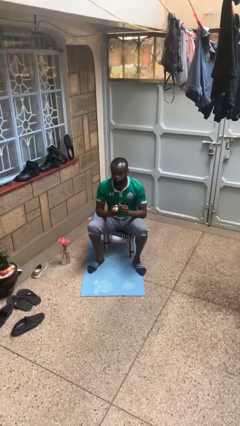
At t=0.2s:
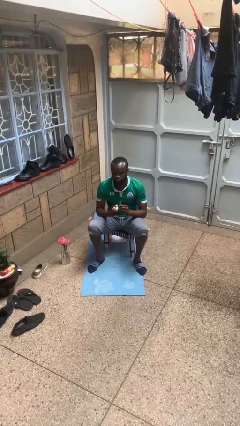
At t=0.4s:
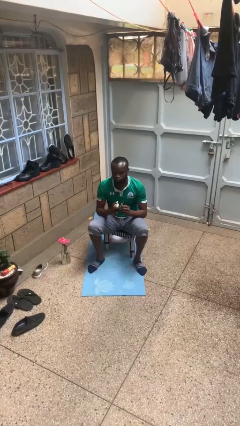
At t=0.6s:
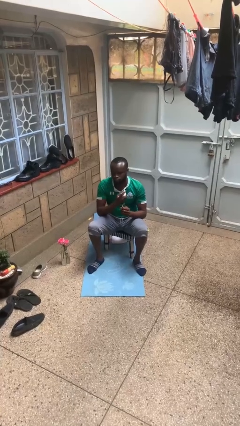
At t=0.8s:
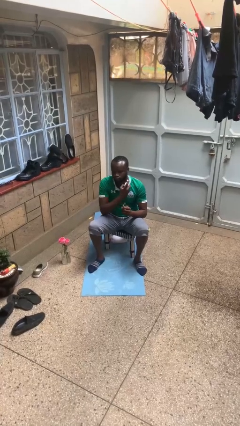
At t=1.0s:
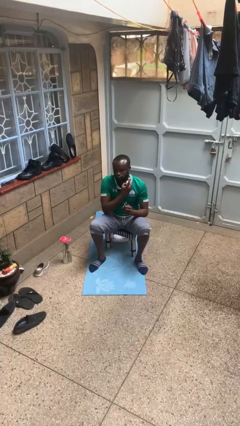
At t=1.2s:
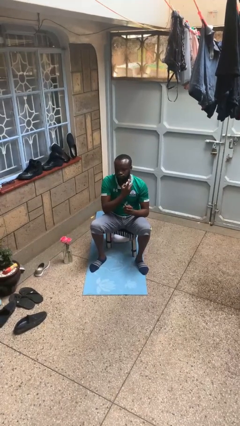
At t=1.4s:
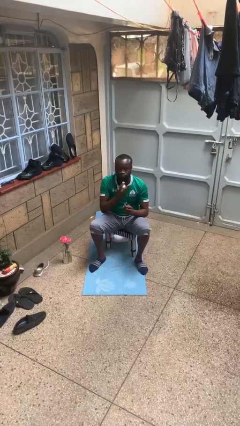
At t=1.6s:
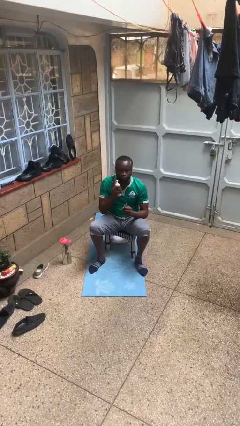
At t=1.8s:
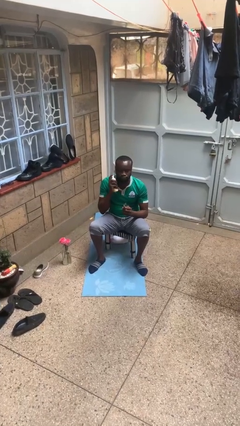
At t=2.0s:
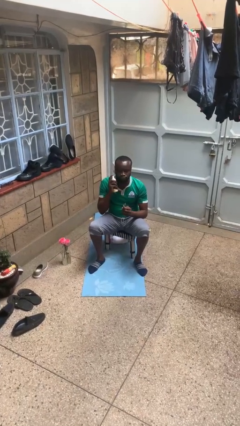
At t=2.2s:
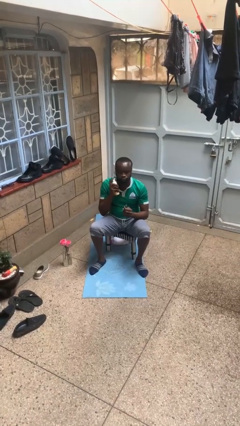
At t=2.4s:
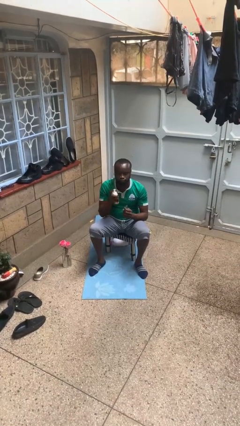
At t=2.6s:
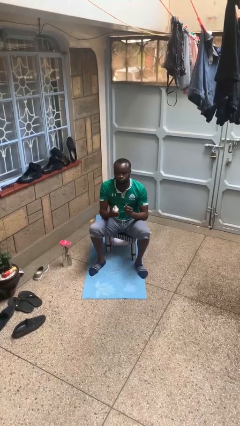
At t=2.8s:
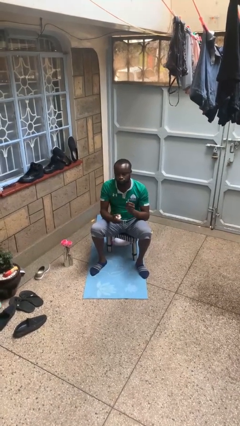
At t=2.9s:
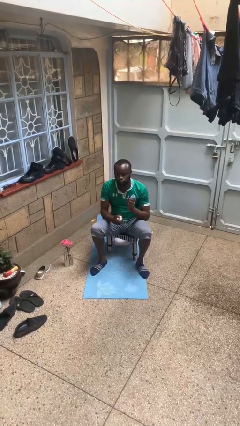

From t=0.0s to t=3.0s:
person applies shaving cream

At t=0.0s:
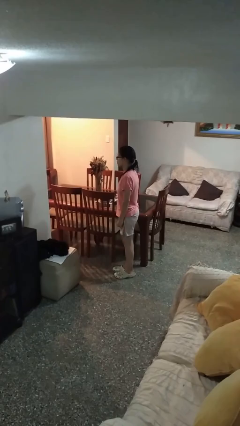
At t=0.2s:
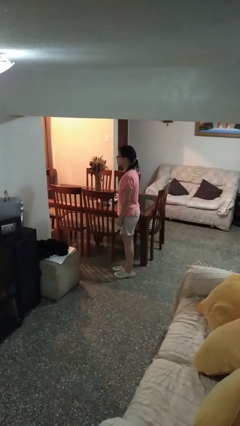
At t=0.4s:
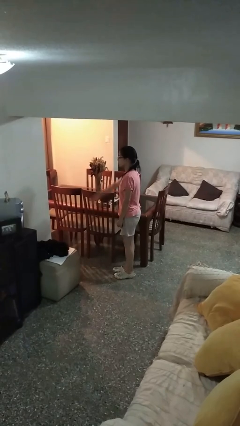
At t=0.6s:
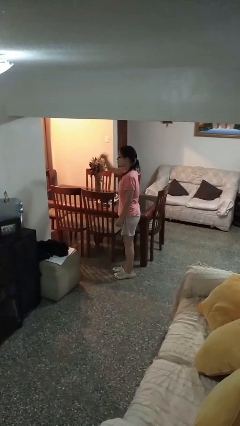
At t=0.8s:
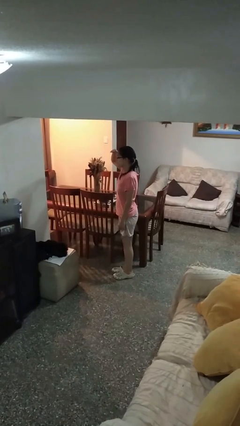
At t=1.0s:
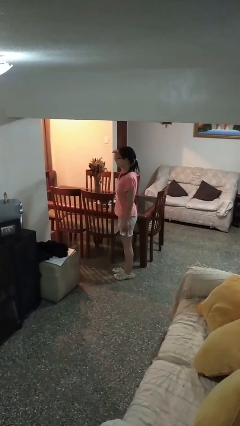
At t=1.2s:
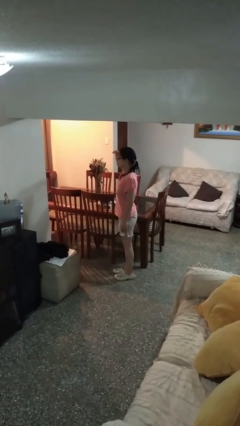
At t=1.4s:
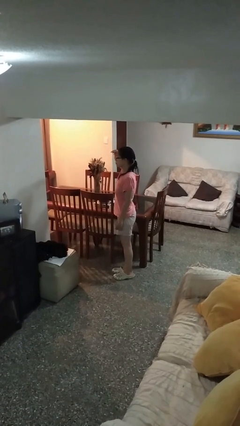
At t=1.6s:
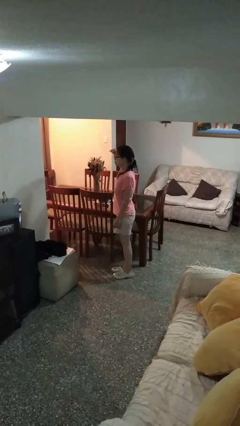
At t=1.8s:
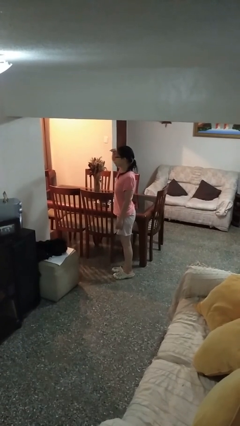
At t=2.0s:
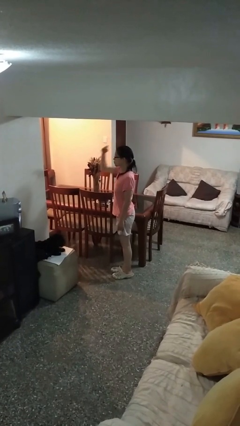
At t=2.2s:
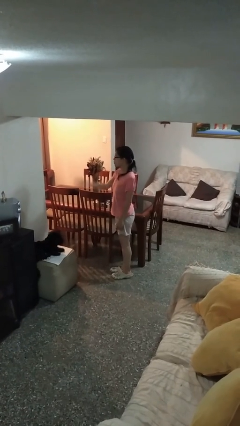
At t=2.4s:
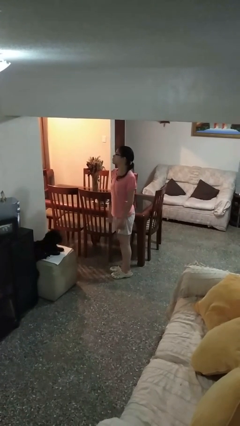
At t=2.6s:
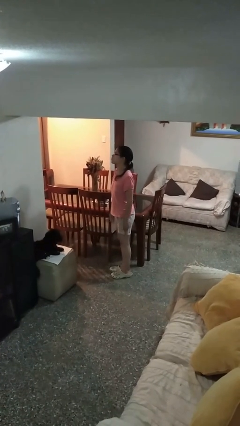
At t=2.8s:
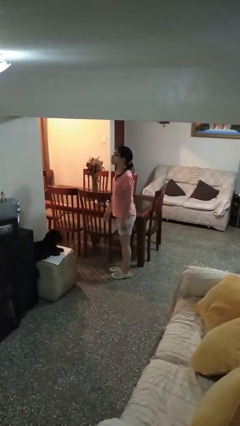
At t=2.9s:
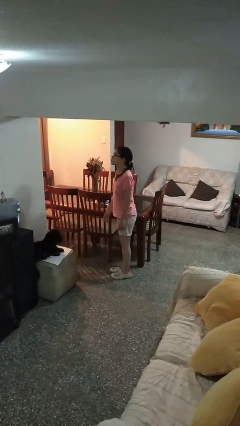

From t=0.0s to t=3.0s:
person salutes

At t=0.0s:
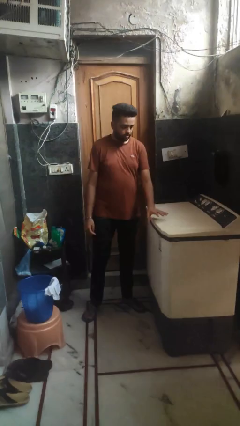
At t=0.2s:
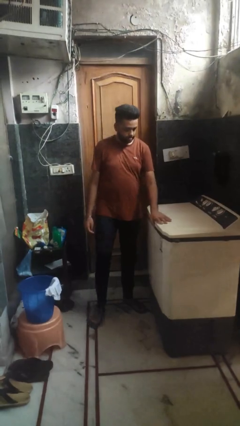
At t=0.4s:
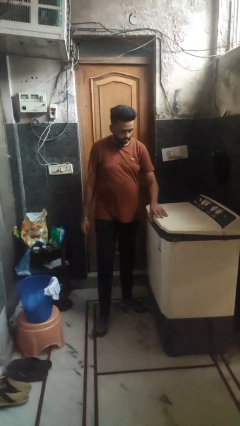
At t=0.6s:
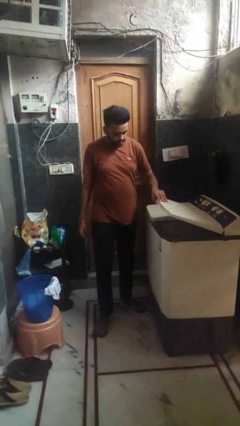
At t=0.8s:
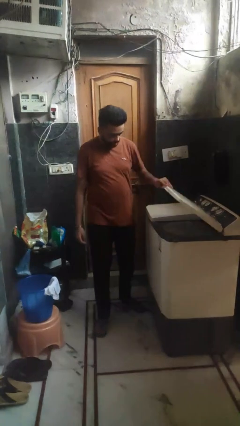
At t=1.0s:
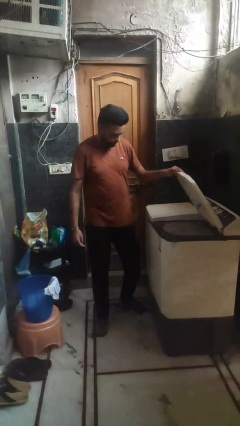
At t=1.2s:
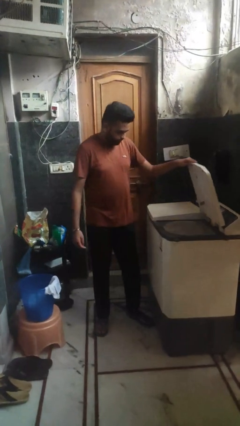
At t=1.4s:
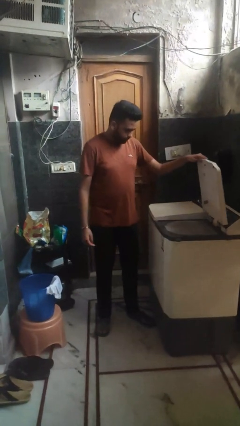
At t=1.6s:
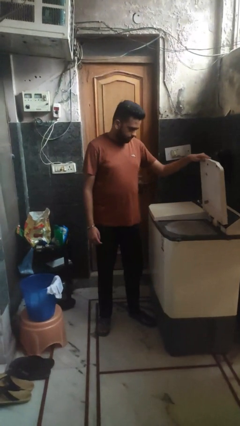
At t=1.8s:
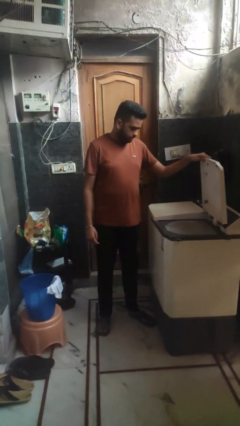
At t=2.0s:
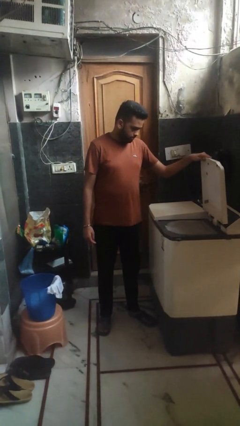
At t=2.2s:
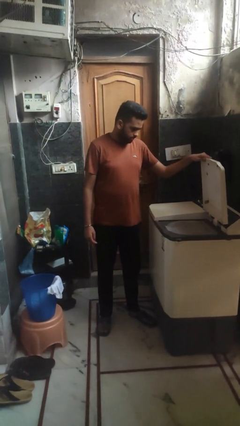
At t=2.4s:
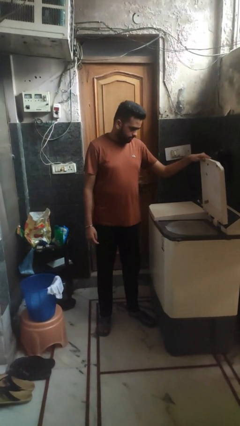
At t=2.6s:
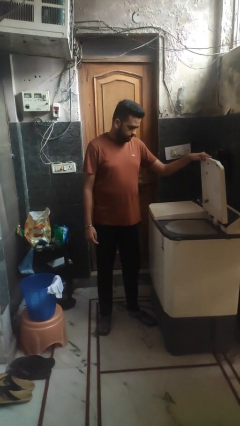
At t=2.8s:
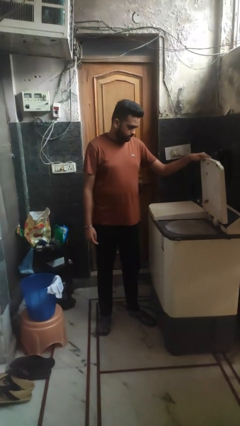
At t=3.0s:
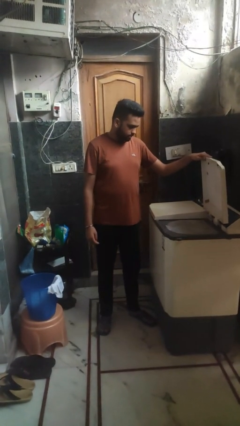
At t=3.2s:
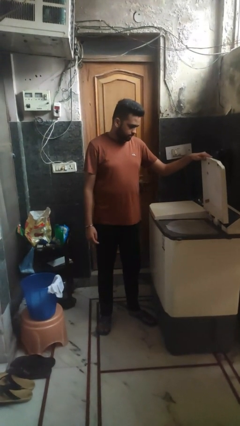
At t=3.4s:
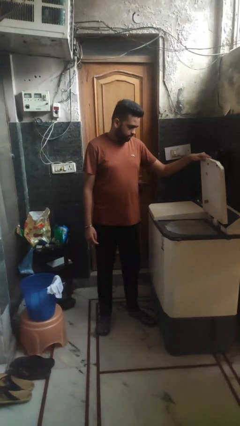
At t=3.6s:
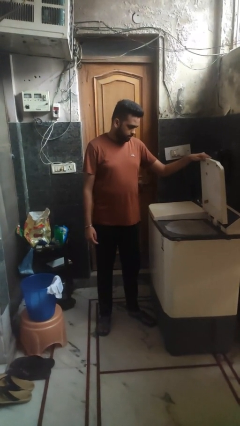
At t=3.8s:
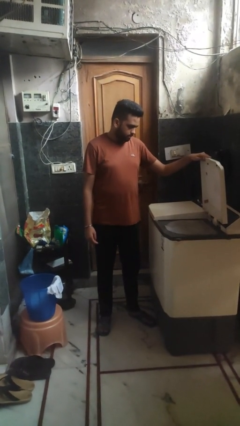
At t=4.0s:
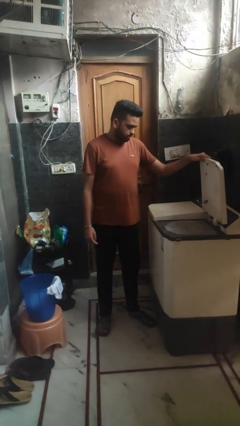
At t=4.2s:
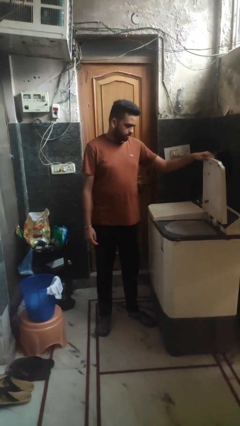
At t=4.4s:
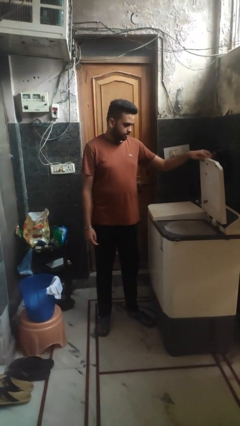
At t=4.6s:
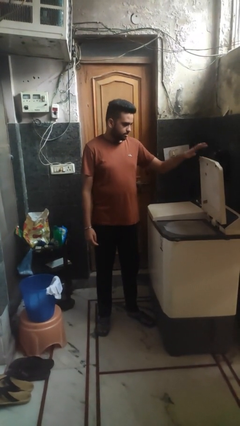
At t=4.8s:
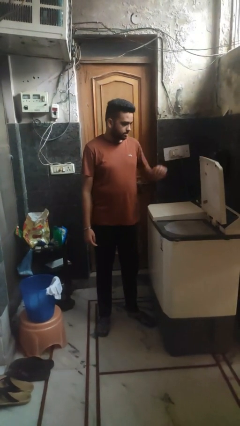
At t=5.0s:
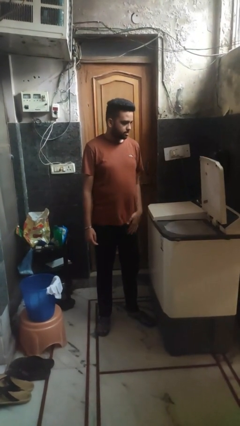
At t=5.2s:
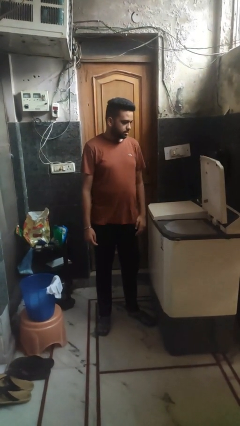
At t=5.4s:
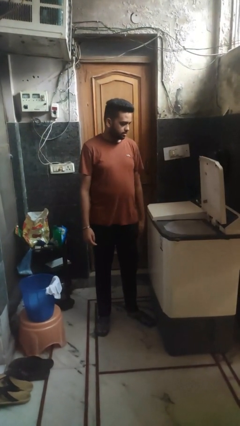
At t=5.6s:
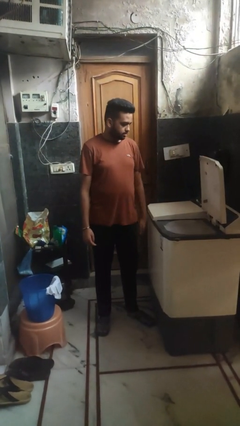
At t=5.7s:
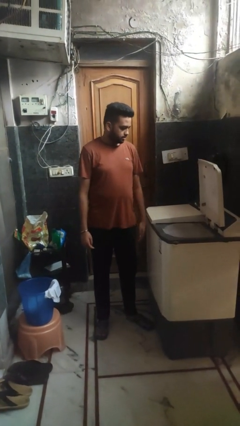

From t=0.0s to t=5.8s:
person opens clothes washer

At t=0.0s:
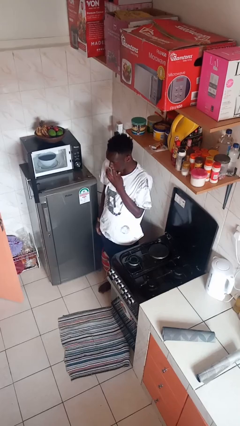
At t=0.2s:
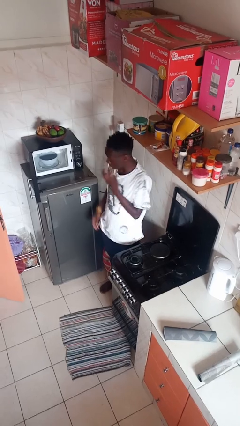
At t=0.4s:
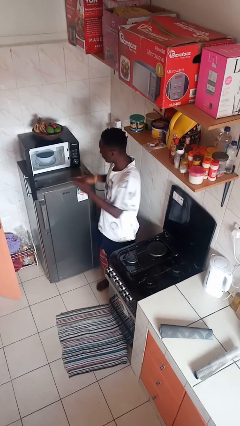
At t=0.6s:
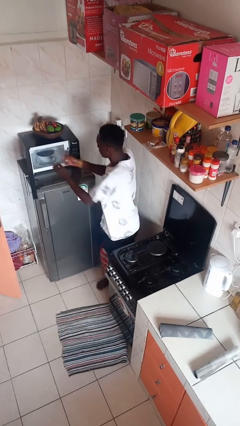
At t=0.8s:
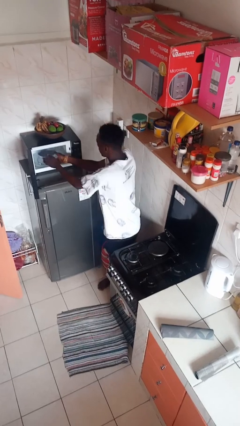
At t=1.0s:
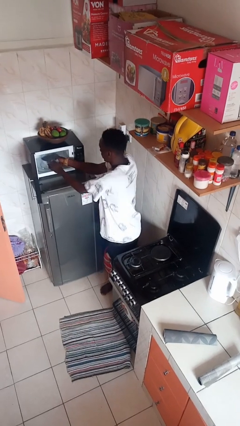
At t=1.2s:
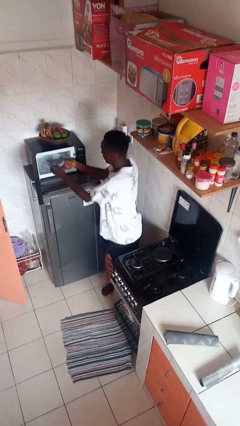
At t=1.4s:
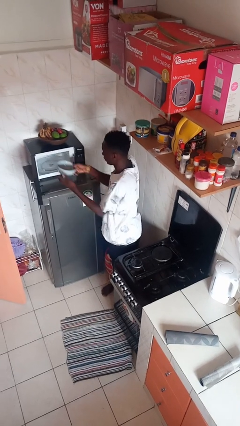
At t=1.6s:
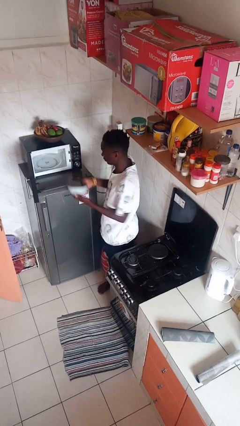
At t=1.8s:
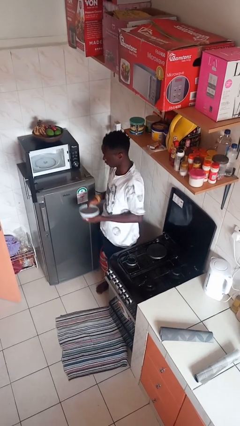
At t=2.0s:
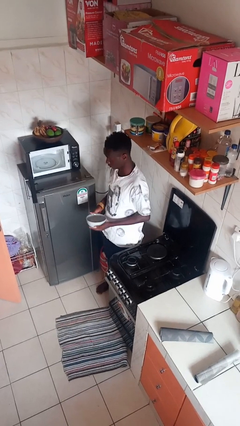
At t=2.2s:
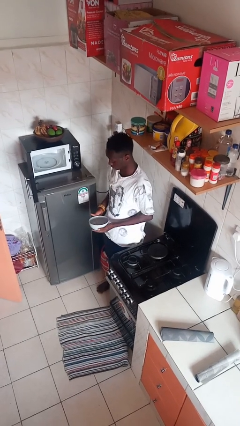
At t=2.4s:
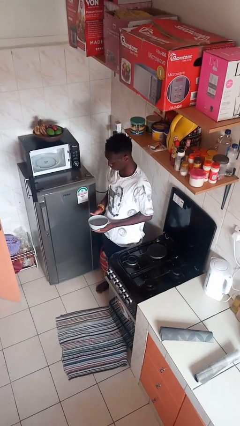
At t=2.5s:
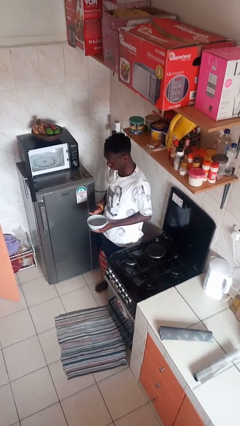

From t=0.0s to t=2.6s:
person takes object from microwave

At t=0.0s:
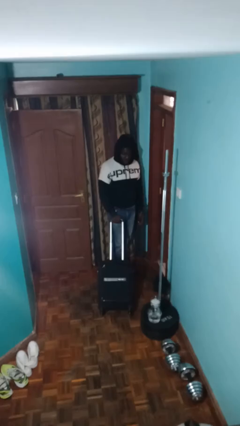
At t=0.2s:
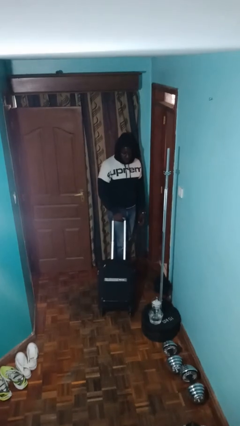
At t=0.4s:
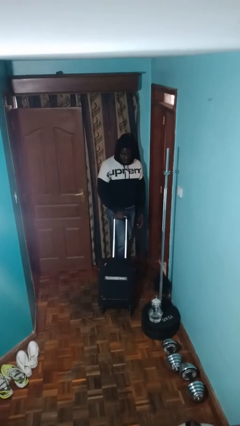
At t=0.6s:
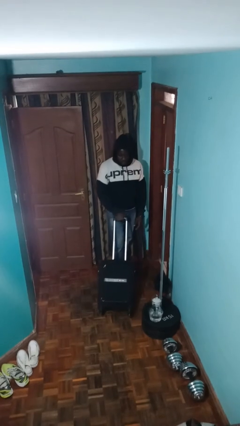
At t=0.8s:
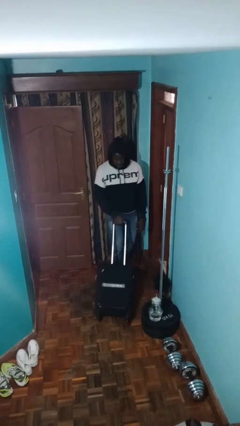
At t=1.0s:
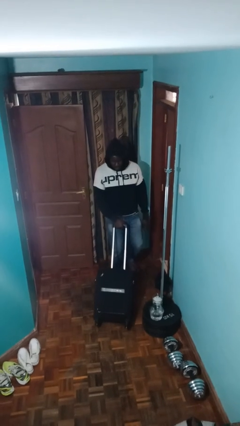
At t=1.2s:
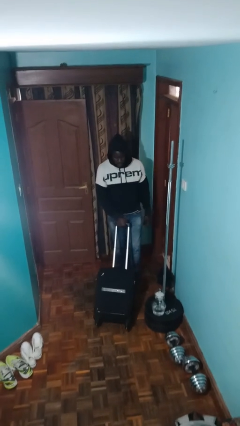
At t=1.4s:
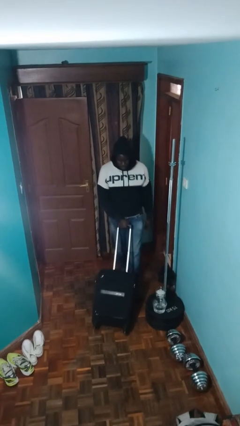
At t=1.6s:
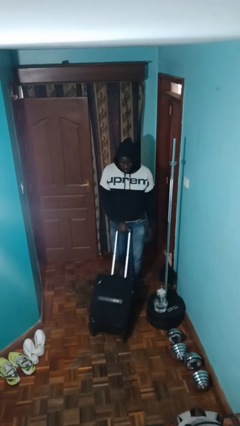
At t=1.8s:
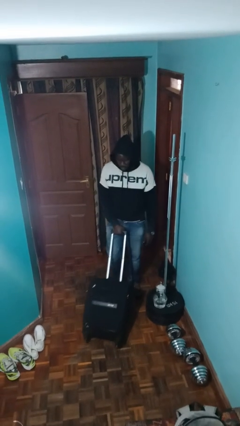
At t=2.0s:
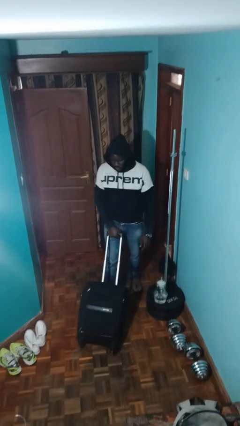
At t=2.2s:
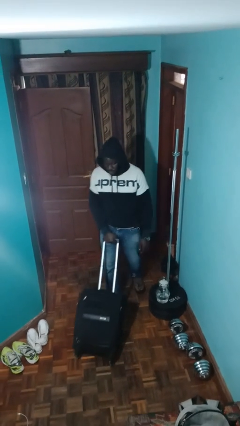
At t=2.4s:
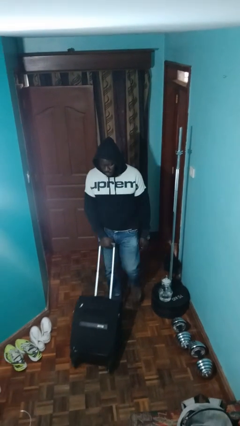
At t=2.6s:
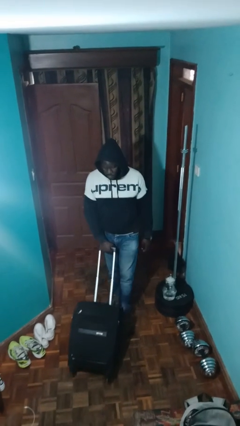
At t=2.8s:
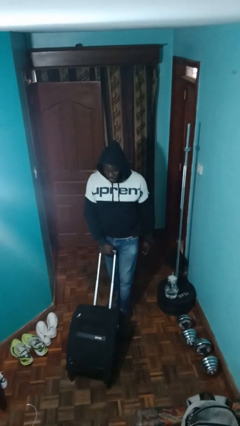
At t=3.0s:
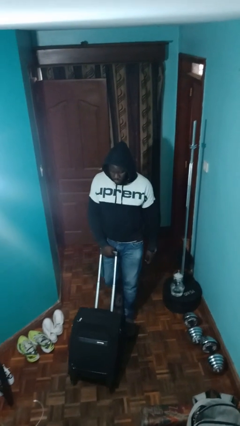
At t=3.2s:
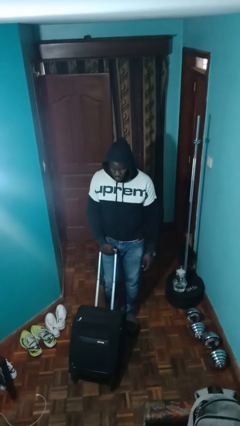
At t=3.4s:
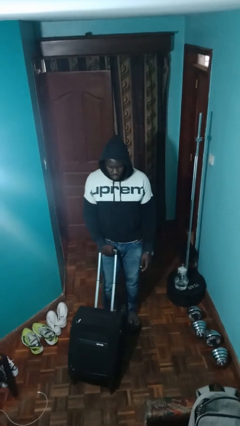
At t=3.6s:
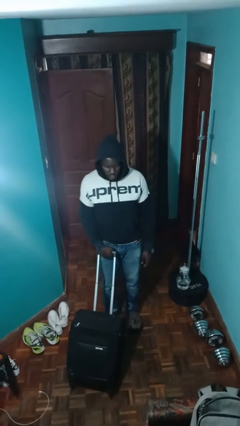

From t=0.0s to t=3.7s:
person pushes wheeled cart
